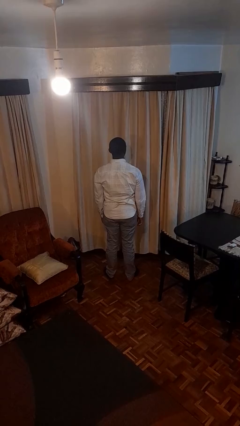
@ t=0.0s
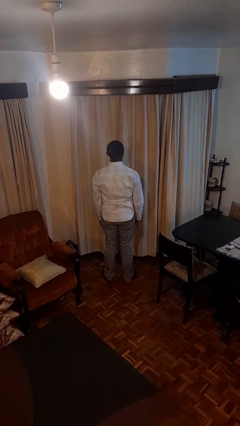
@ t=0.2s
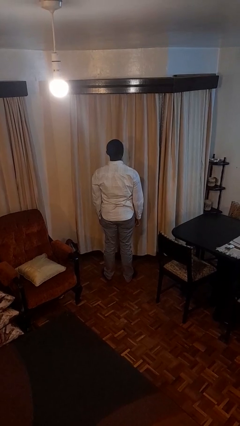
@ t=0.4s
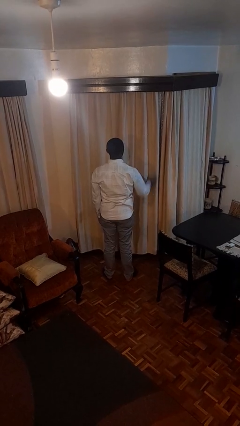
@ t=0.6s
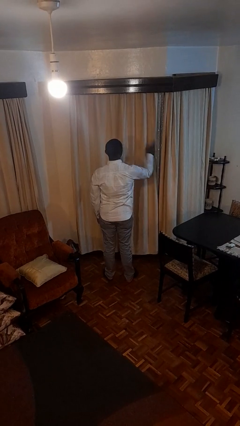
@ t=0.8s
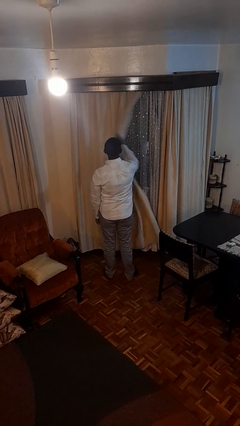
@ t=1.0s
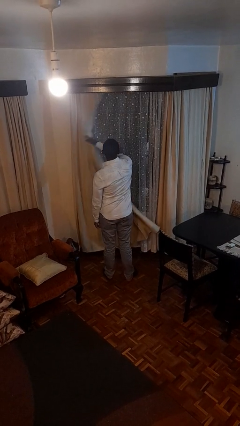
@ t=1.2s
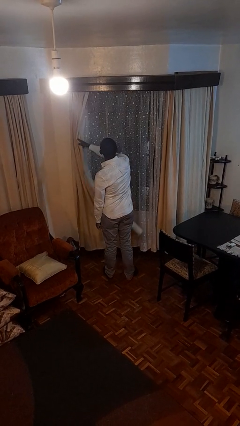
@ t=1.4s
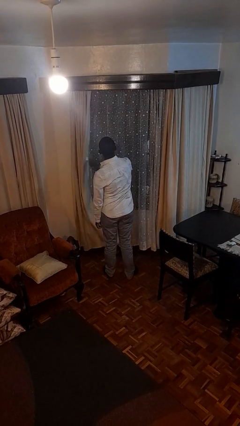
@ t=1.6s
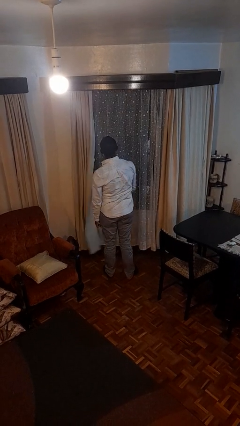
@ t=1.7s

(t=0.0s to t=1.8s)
person opens curtains

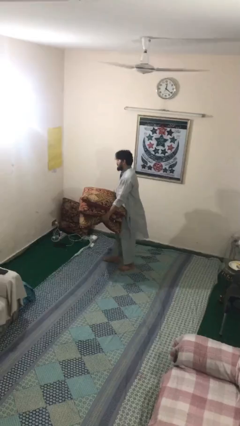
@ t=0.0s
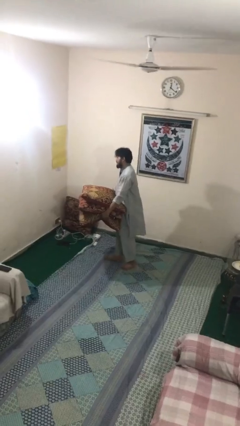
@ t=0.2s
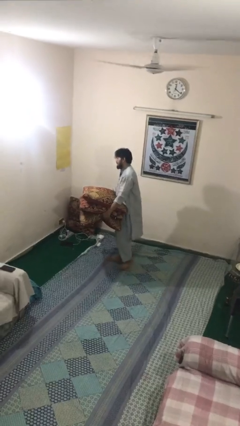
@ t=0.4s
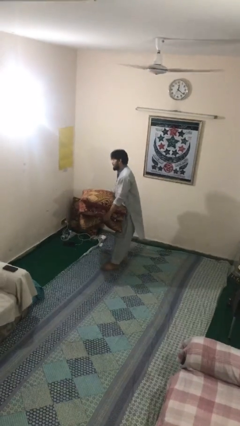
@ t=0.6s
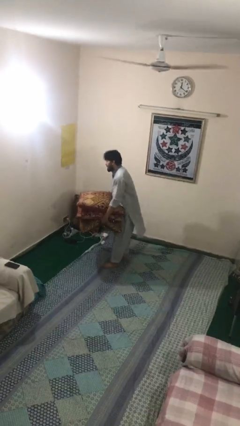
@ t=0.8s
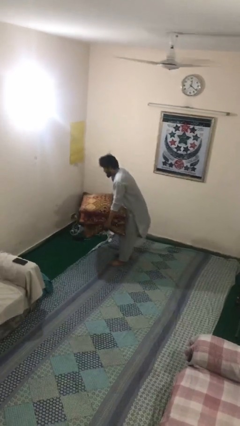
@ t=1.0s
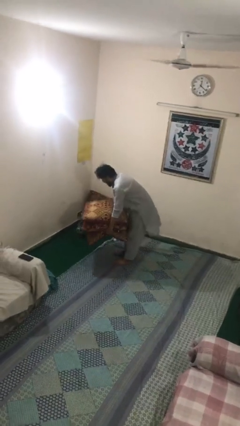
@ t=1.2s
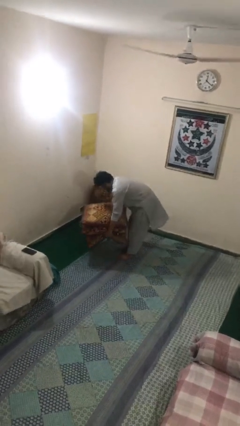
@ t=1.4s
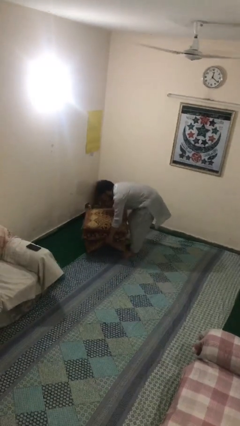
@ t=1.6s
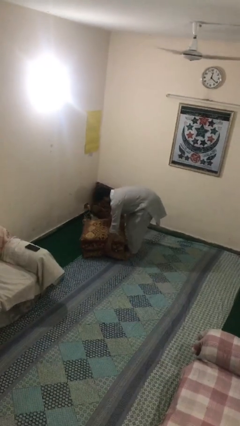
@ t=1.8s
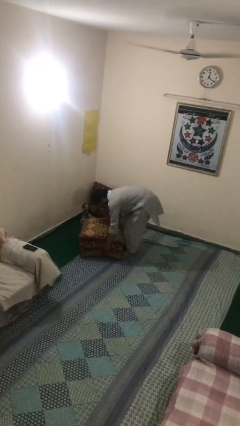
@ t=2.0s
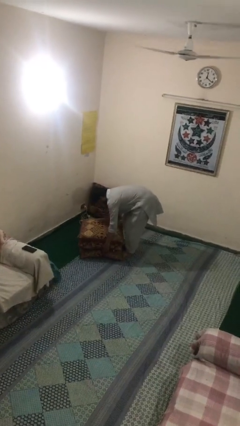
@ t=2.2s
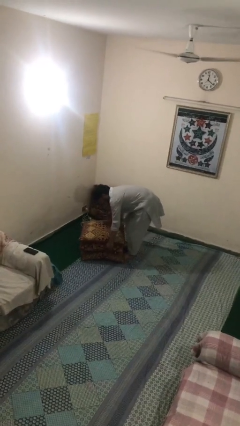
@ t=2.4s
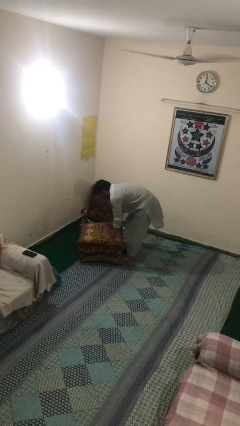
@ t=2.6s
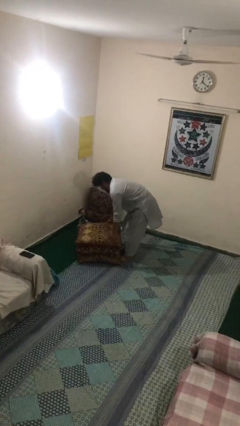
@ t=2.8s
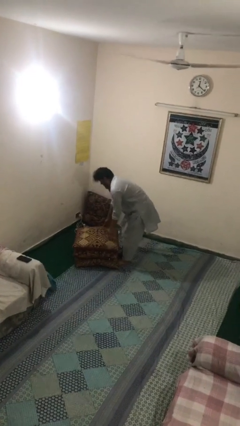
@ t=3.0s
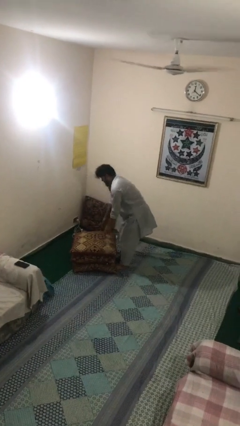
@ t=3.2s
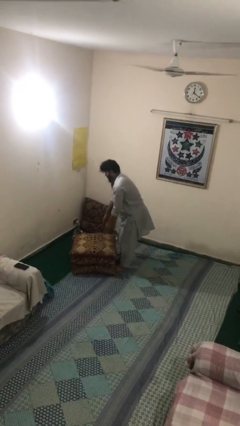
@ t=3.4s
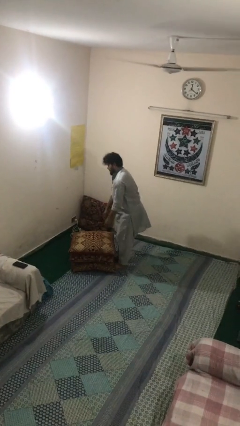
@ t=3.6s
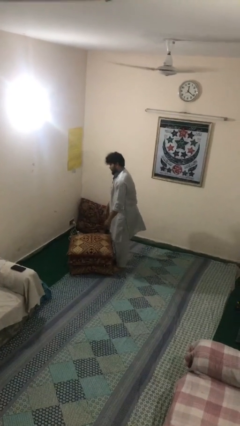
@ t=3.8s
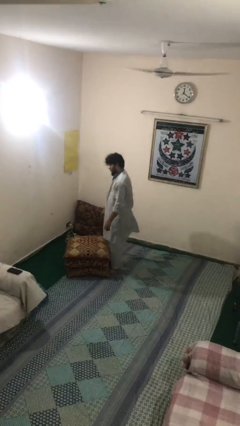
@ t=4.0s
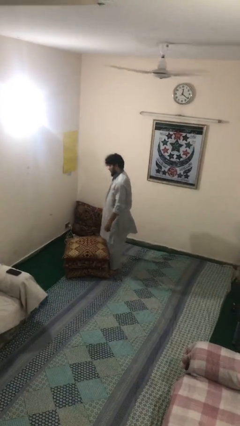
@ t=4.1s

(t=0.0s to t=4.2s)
person puts down object on floor

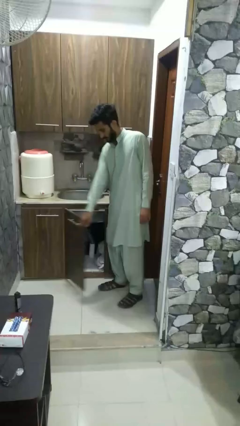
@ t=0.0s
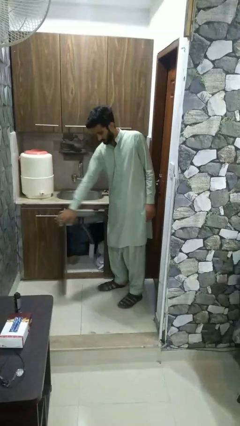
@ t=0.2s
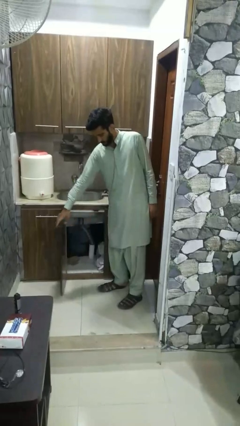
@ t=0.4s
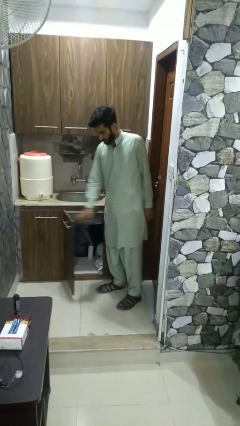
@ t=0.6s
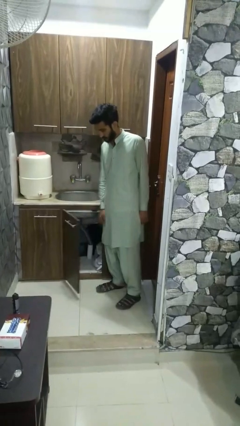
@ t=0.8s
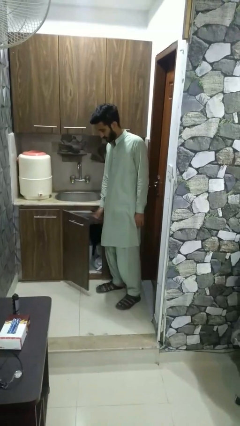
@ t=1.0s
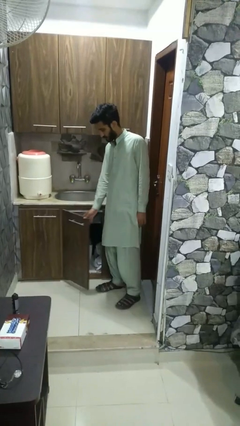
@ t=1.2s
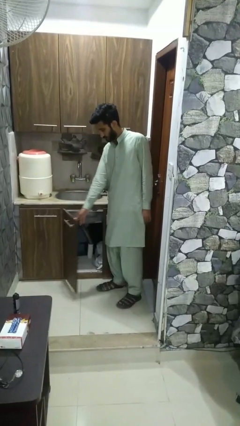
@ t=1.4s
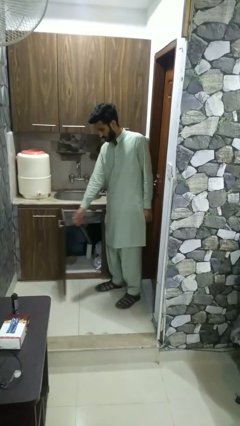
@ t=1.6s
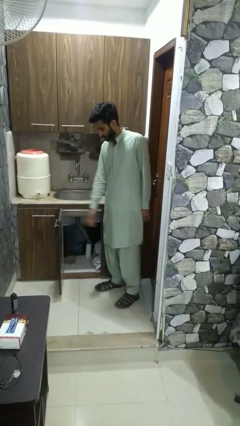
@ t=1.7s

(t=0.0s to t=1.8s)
person opens closet door

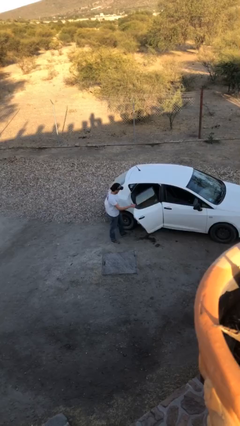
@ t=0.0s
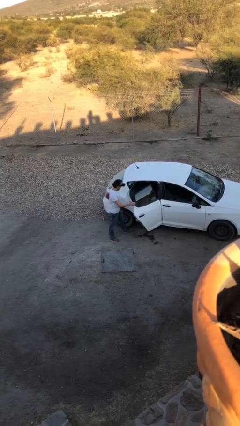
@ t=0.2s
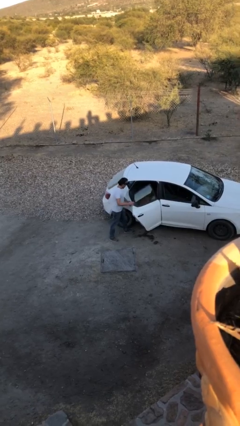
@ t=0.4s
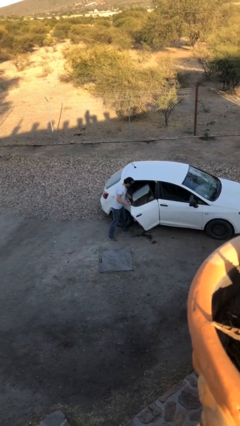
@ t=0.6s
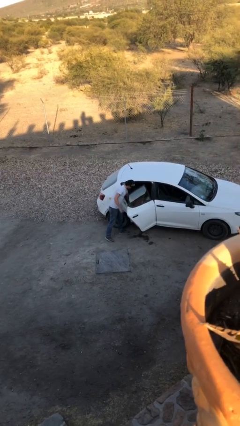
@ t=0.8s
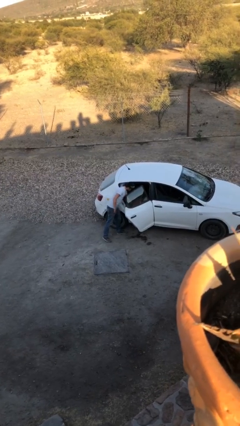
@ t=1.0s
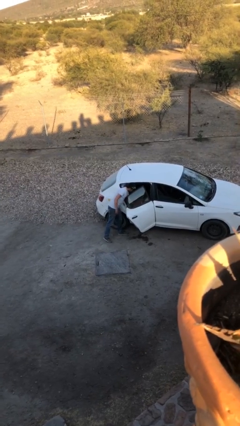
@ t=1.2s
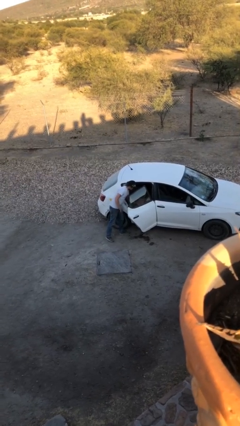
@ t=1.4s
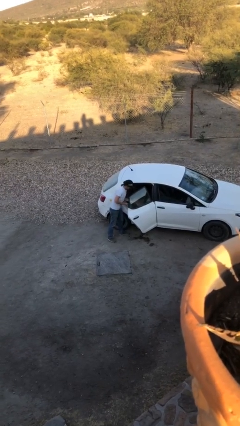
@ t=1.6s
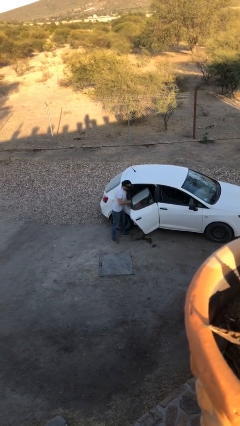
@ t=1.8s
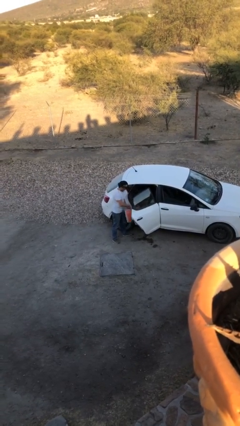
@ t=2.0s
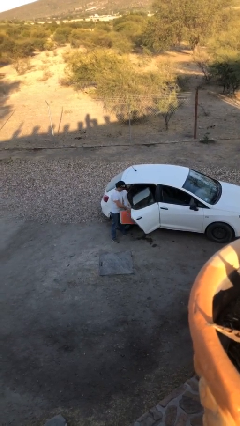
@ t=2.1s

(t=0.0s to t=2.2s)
person unloads car

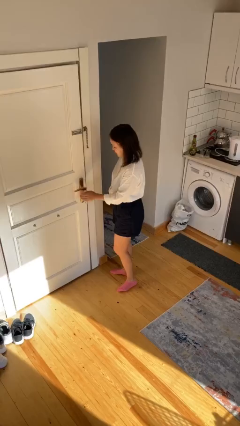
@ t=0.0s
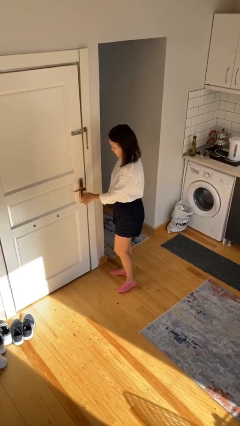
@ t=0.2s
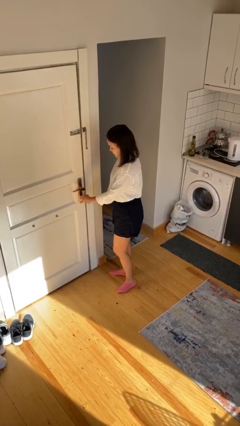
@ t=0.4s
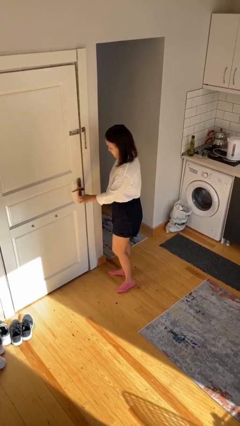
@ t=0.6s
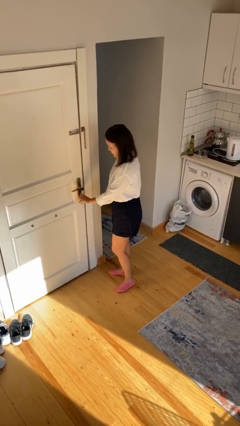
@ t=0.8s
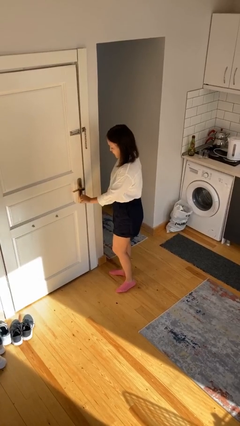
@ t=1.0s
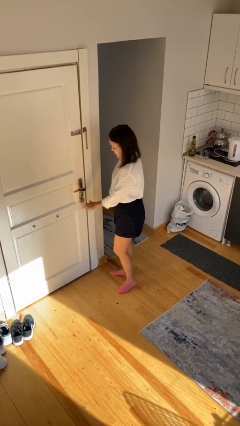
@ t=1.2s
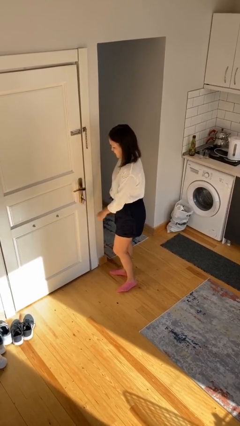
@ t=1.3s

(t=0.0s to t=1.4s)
person locks door with keys

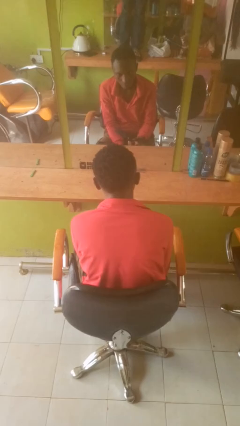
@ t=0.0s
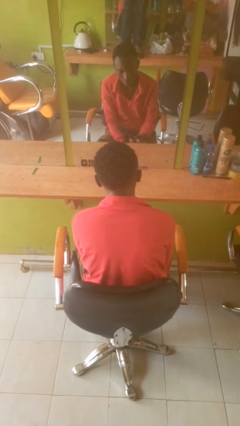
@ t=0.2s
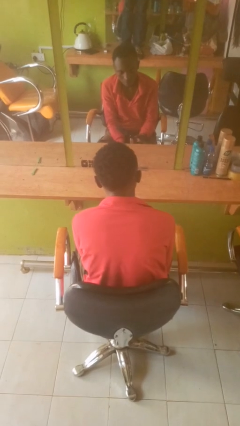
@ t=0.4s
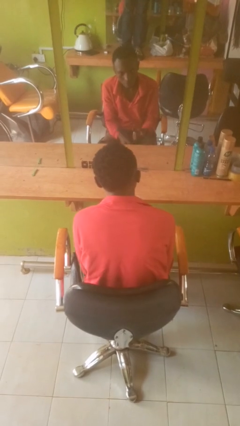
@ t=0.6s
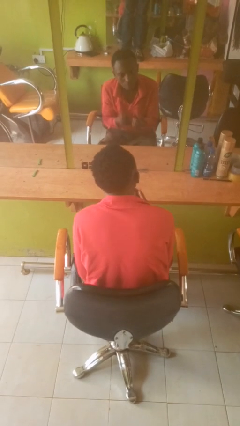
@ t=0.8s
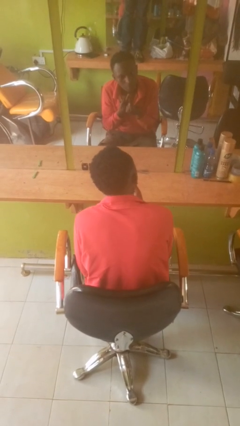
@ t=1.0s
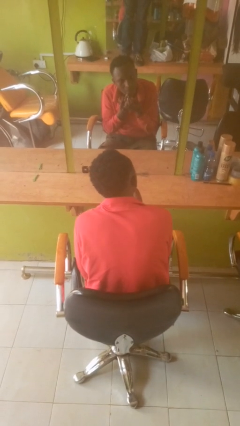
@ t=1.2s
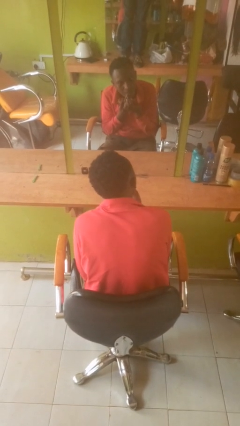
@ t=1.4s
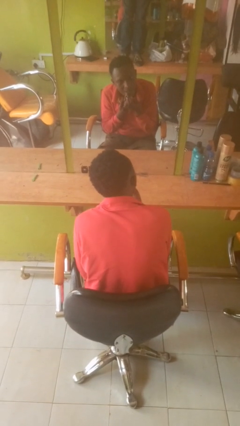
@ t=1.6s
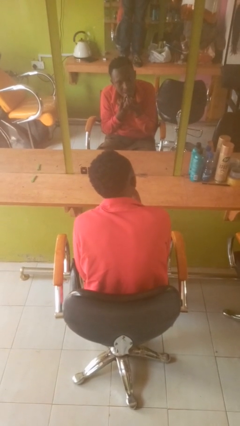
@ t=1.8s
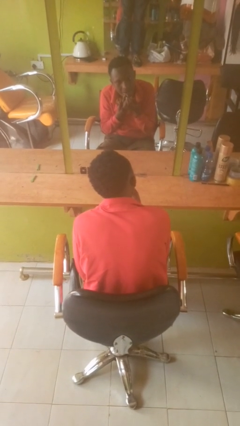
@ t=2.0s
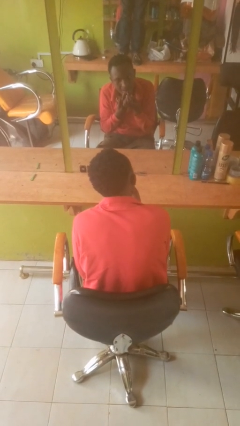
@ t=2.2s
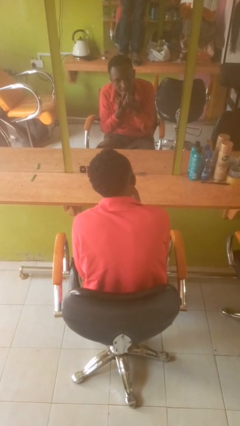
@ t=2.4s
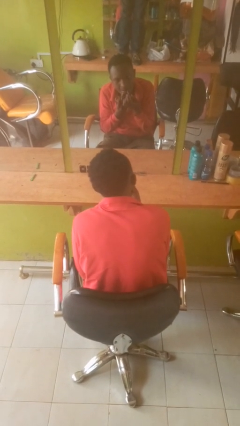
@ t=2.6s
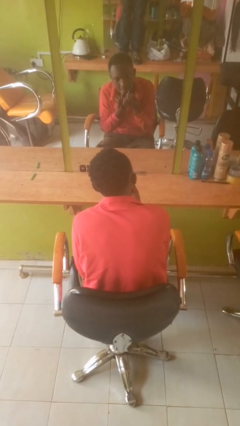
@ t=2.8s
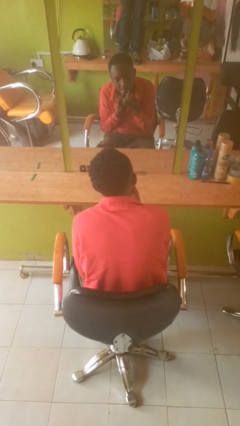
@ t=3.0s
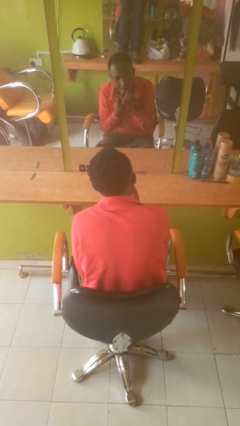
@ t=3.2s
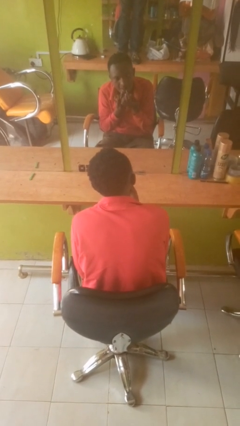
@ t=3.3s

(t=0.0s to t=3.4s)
person applies lip makeup

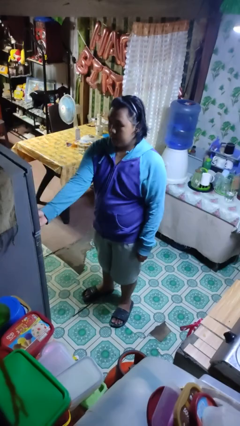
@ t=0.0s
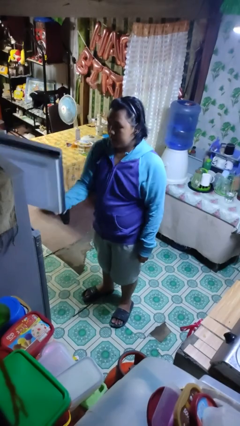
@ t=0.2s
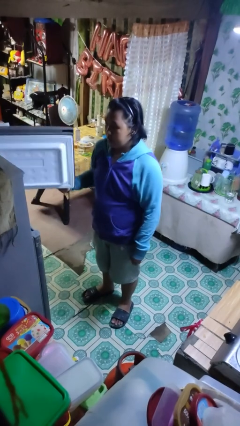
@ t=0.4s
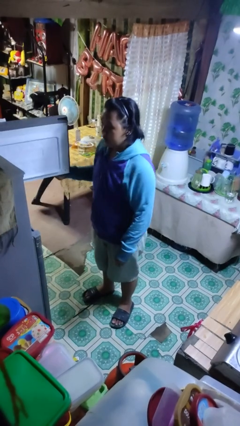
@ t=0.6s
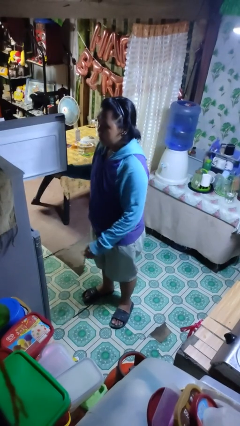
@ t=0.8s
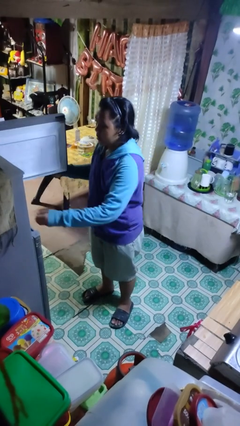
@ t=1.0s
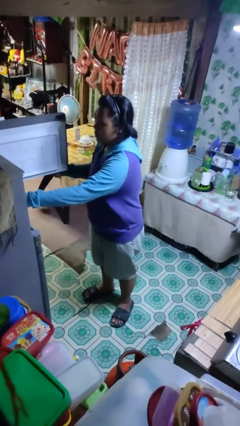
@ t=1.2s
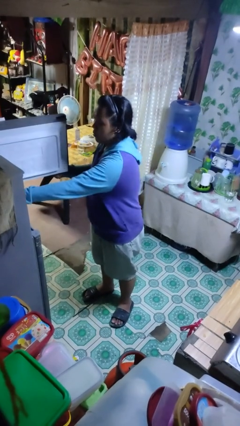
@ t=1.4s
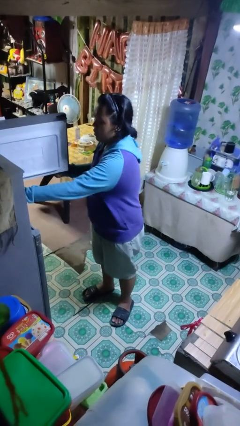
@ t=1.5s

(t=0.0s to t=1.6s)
person opens refrigerator

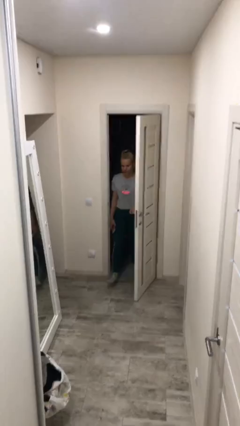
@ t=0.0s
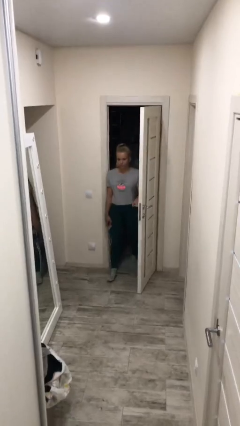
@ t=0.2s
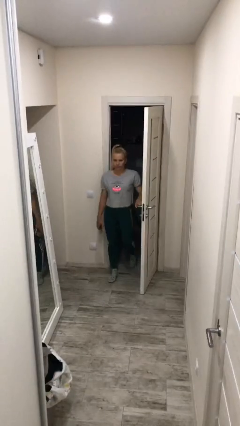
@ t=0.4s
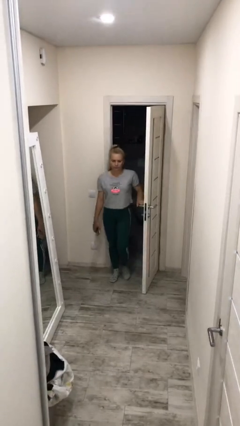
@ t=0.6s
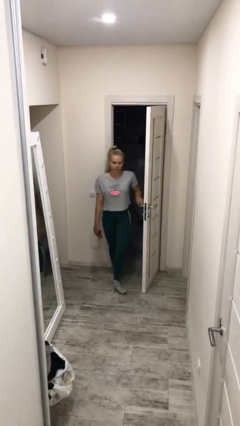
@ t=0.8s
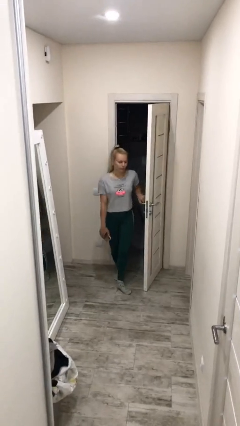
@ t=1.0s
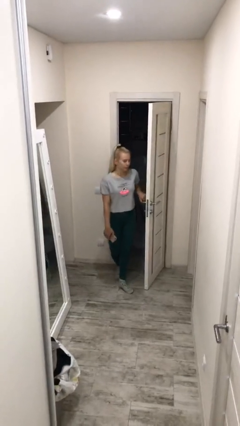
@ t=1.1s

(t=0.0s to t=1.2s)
person enters scene through structure
